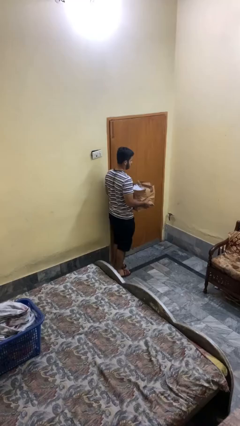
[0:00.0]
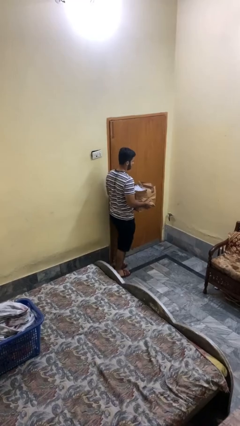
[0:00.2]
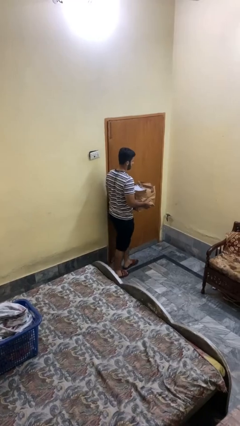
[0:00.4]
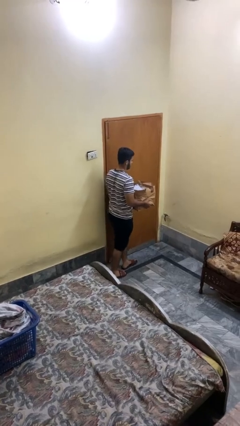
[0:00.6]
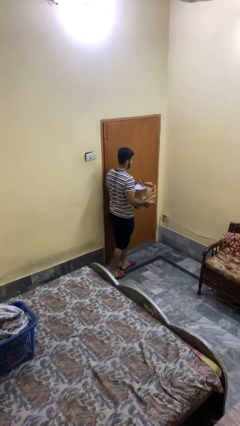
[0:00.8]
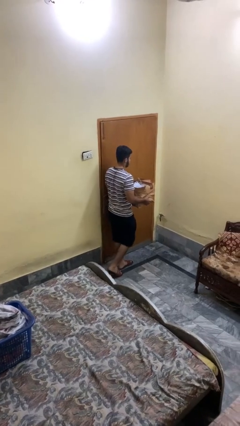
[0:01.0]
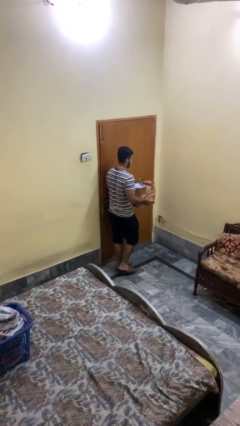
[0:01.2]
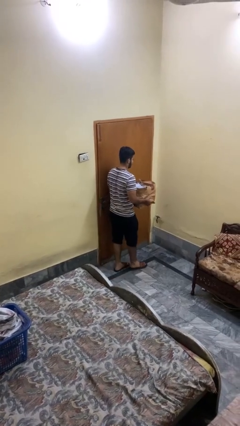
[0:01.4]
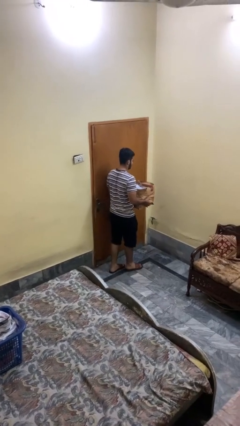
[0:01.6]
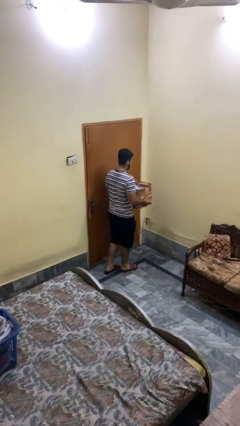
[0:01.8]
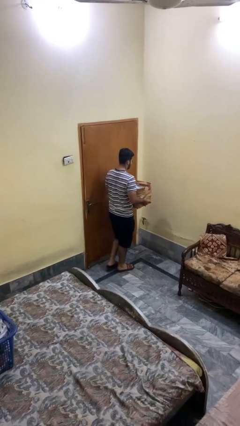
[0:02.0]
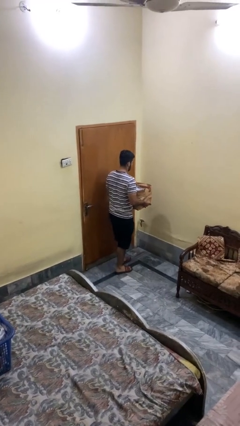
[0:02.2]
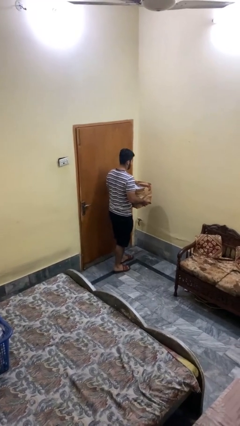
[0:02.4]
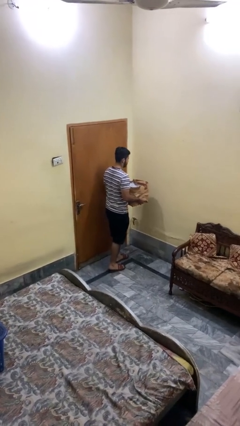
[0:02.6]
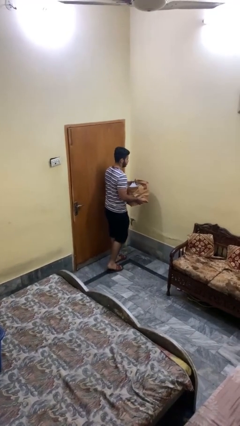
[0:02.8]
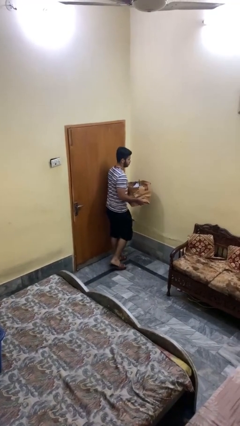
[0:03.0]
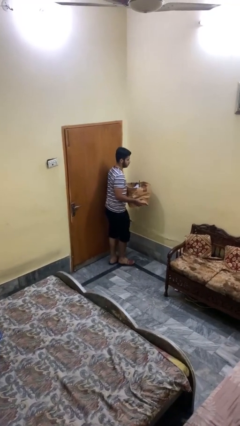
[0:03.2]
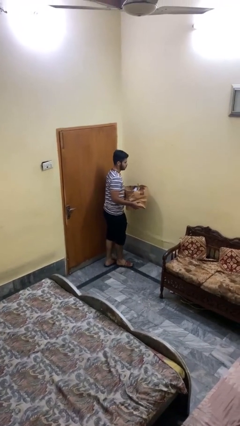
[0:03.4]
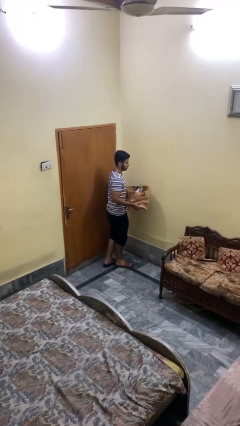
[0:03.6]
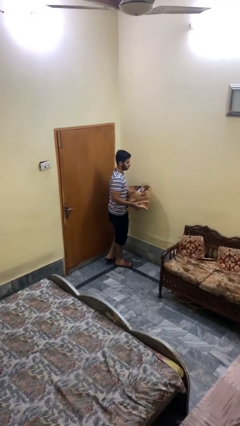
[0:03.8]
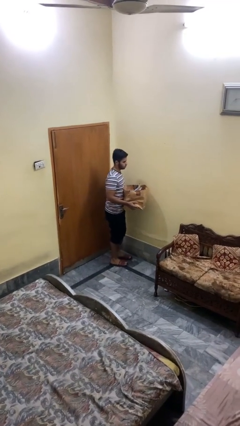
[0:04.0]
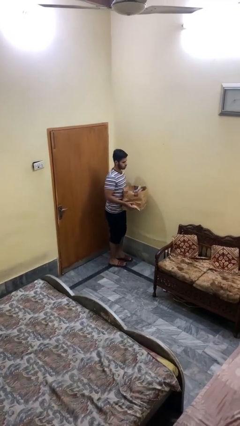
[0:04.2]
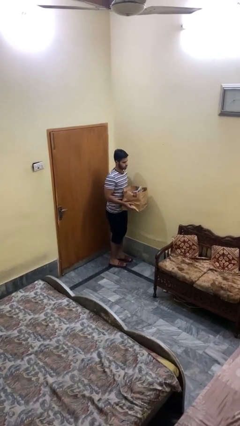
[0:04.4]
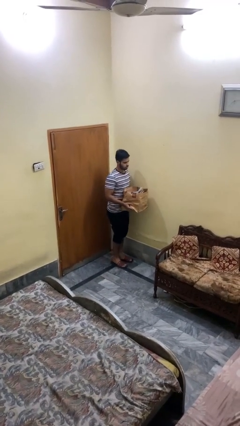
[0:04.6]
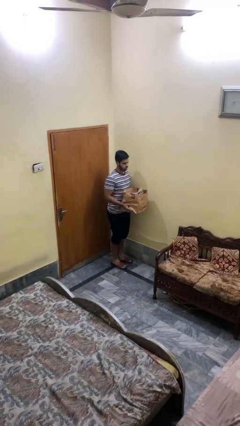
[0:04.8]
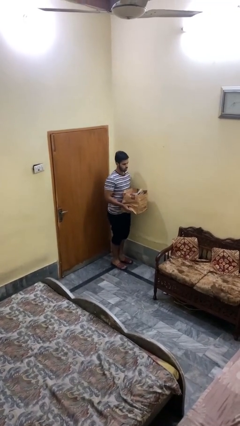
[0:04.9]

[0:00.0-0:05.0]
person carries groceries

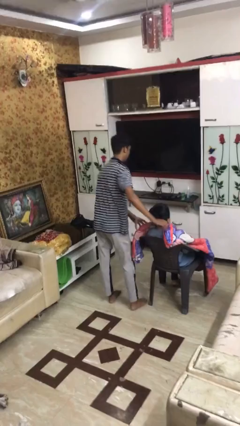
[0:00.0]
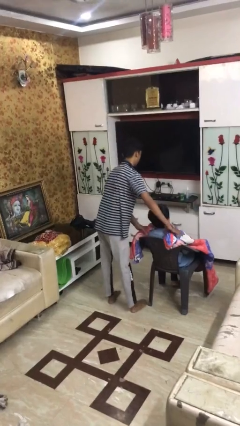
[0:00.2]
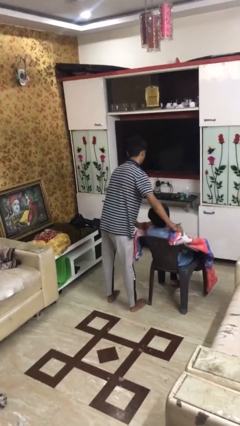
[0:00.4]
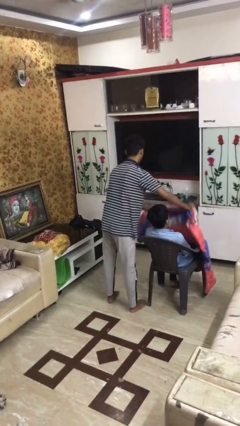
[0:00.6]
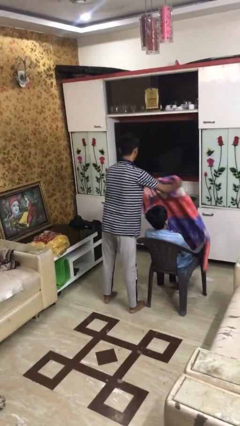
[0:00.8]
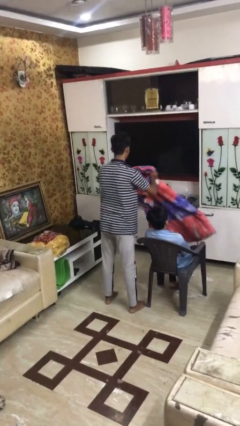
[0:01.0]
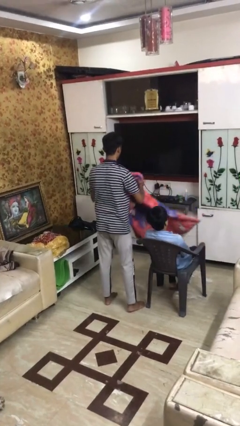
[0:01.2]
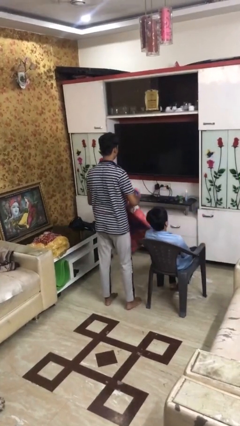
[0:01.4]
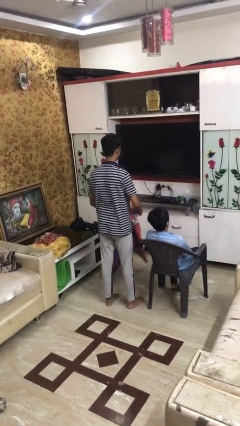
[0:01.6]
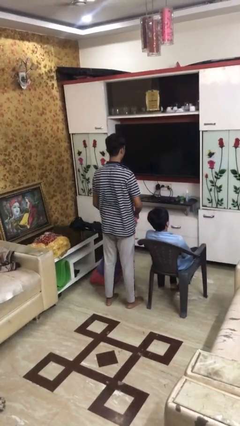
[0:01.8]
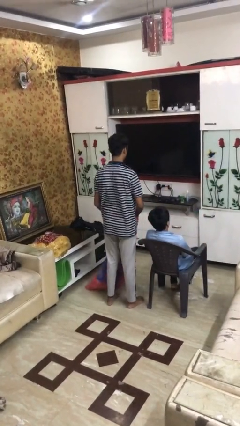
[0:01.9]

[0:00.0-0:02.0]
person uncovers friend with blanket

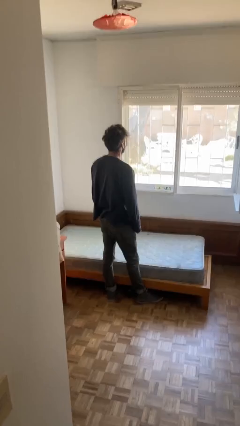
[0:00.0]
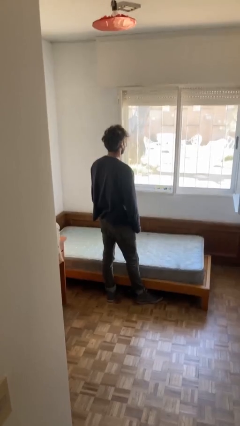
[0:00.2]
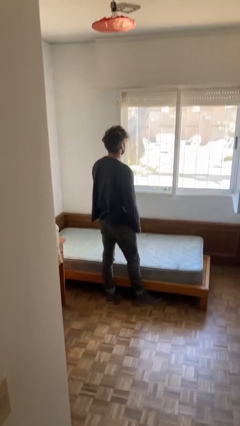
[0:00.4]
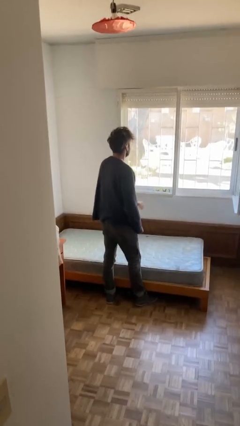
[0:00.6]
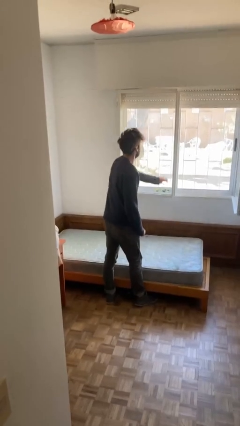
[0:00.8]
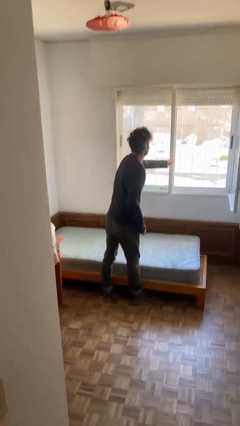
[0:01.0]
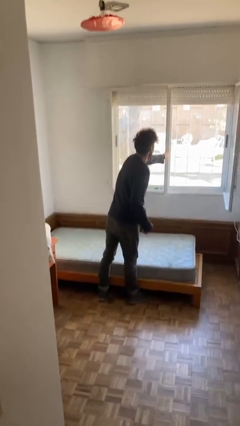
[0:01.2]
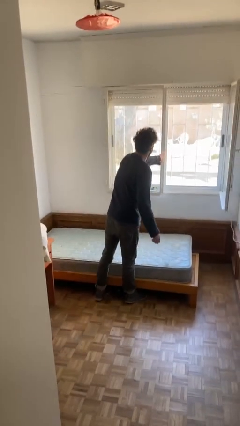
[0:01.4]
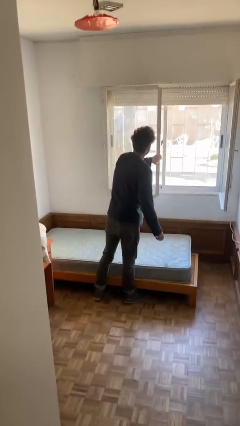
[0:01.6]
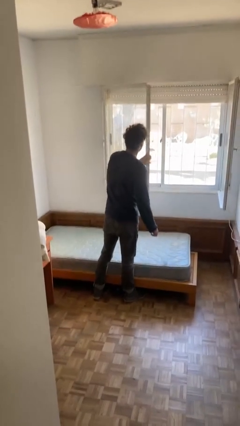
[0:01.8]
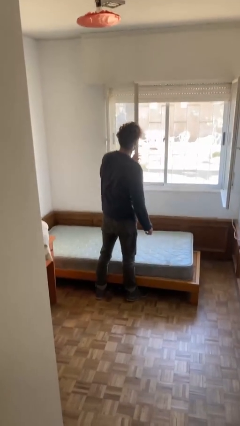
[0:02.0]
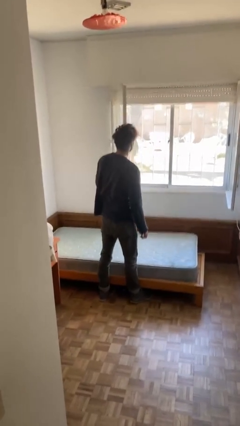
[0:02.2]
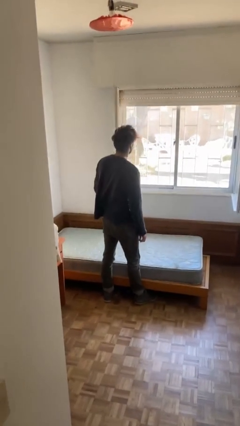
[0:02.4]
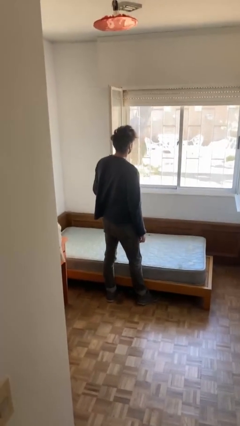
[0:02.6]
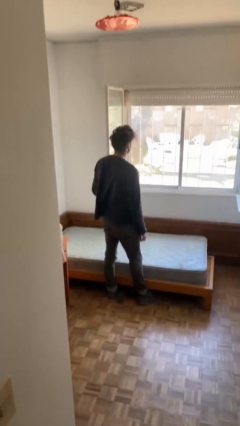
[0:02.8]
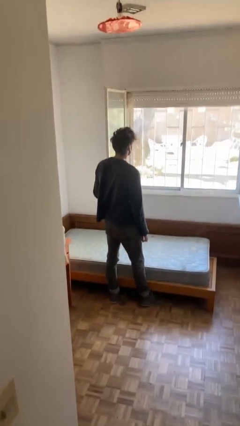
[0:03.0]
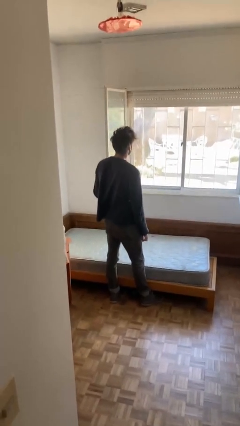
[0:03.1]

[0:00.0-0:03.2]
person opens home window

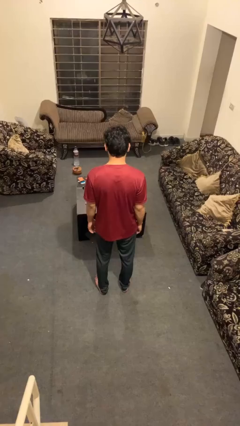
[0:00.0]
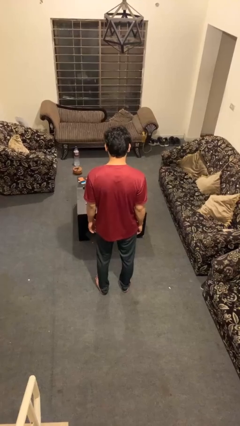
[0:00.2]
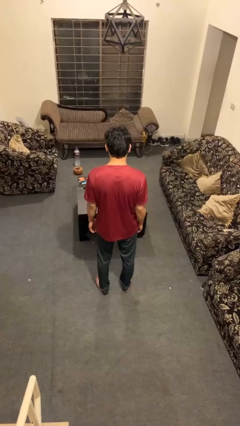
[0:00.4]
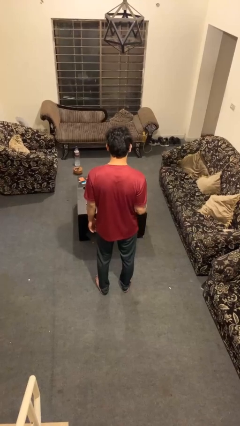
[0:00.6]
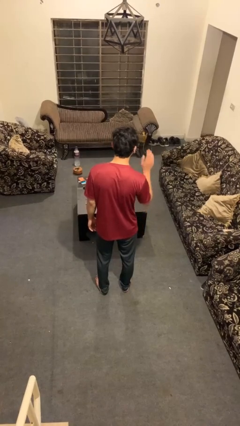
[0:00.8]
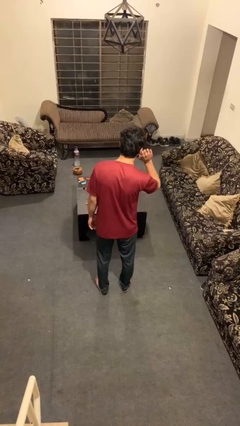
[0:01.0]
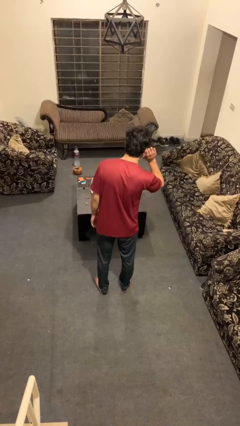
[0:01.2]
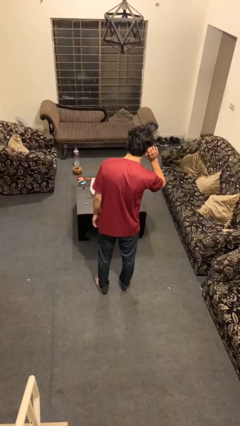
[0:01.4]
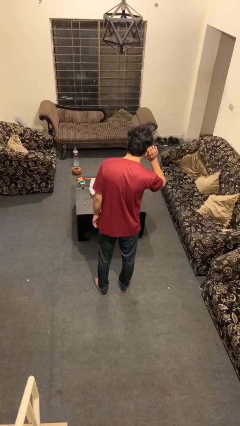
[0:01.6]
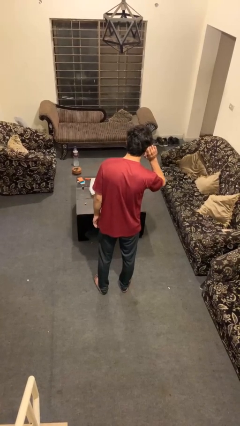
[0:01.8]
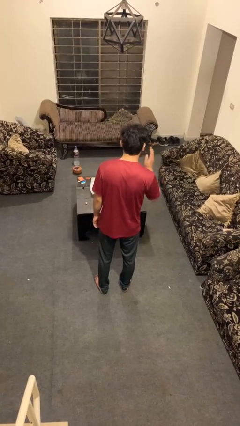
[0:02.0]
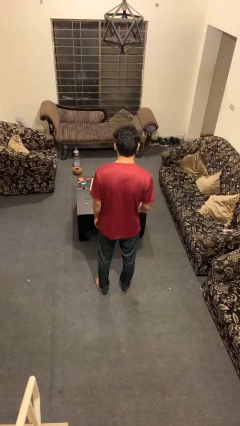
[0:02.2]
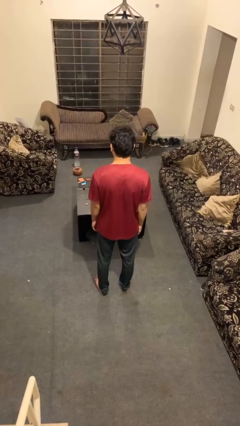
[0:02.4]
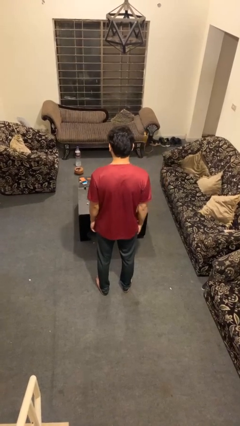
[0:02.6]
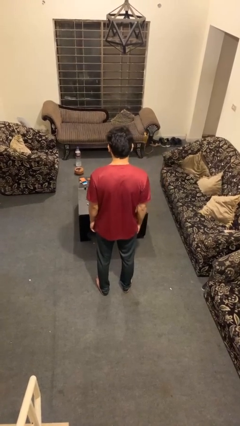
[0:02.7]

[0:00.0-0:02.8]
person gestures listen closely

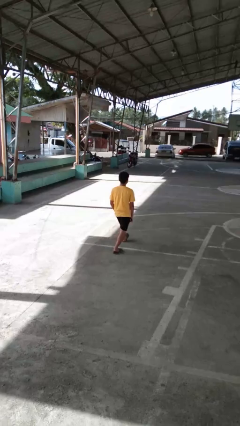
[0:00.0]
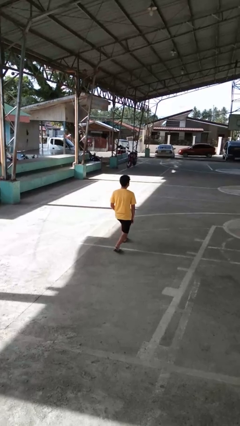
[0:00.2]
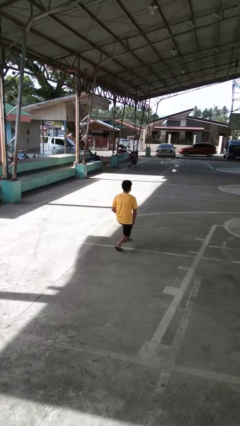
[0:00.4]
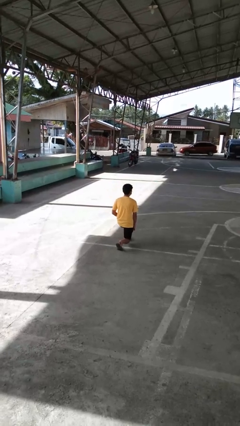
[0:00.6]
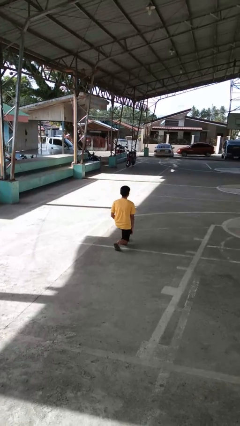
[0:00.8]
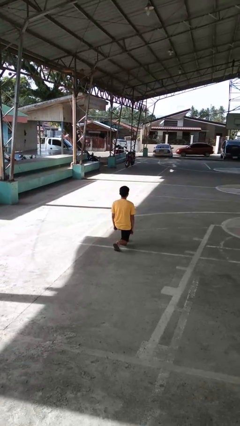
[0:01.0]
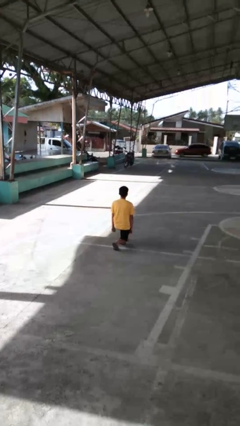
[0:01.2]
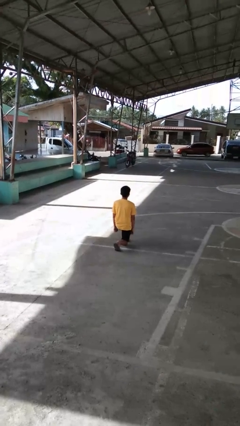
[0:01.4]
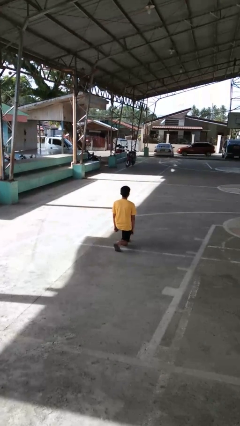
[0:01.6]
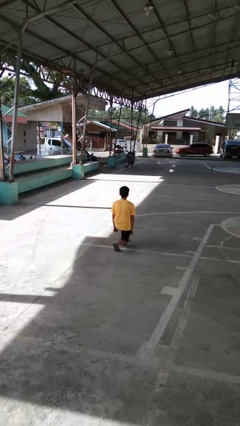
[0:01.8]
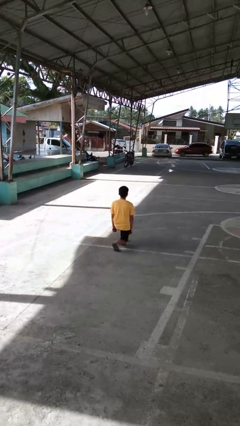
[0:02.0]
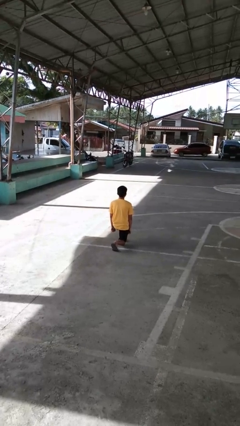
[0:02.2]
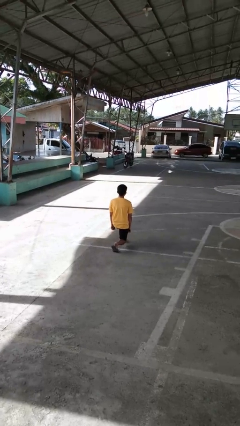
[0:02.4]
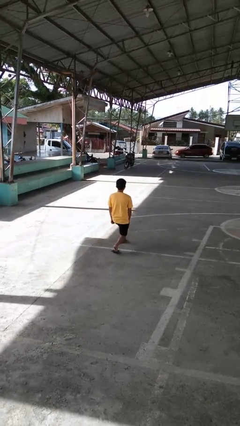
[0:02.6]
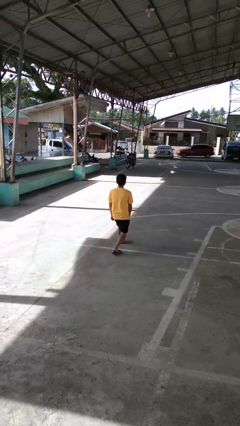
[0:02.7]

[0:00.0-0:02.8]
person kneels

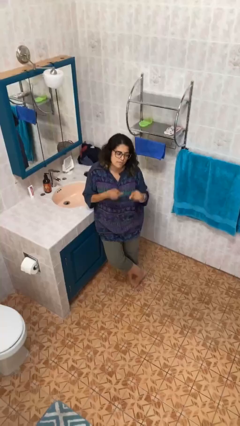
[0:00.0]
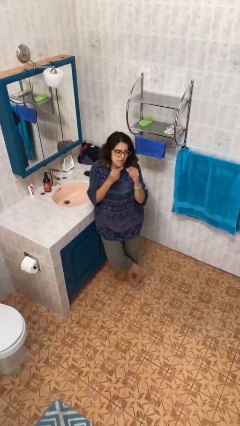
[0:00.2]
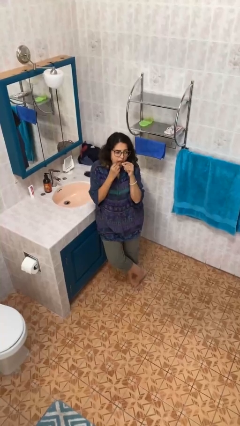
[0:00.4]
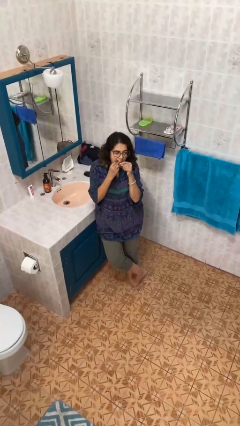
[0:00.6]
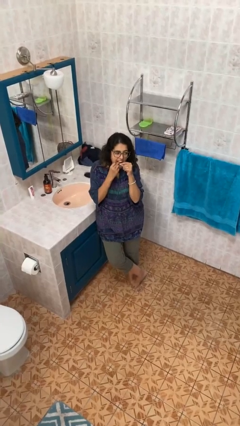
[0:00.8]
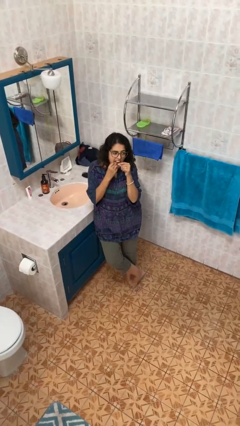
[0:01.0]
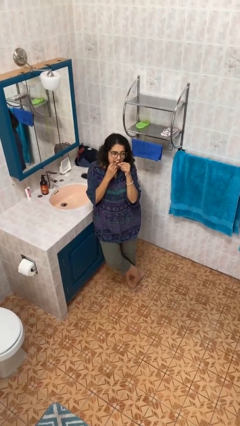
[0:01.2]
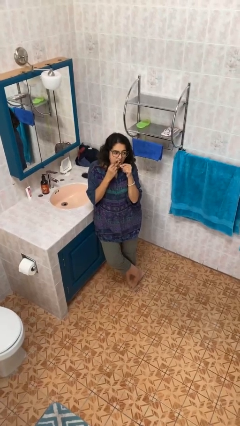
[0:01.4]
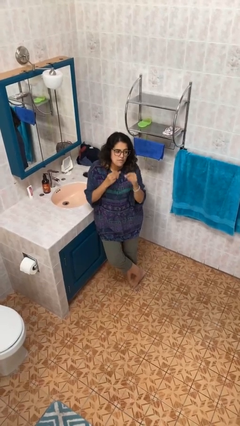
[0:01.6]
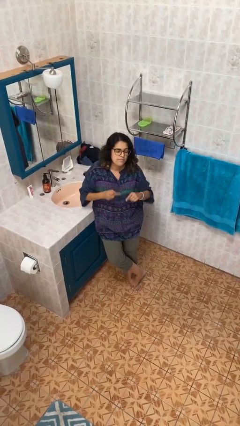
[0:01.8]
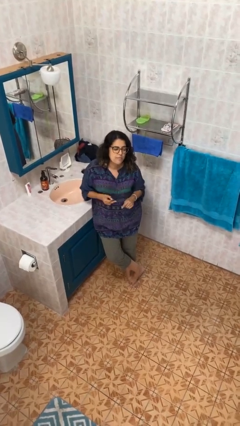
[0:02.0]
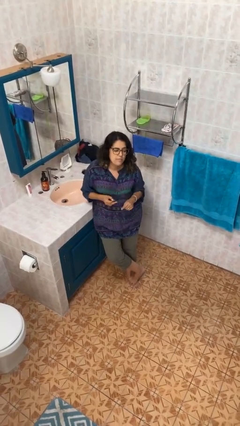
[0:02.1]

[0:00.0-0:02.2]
person flosses
